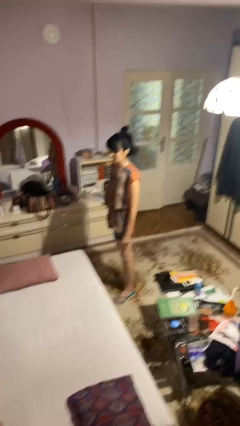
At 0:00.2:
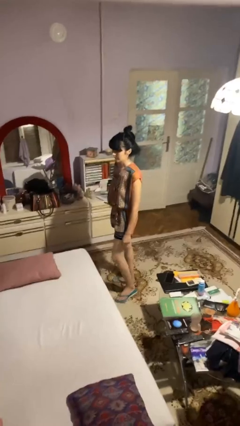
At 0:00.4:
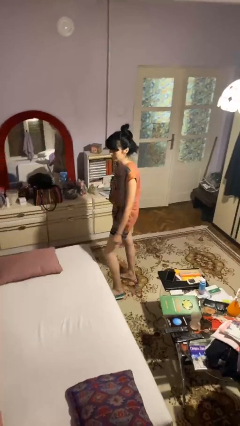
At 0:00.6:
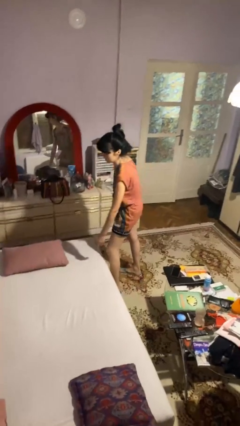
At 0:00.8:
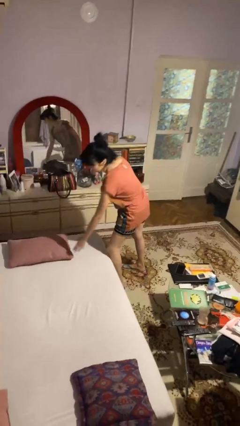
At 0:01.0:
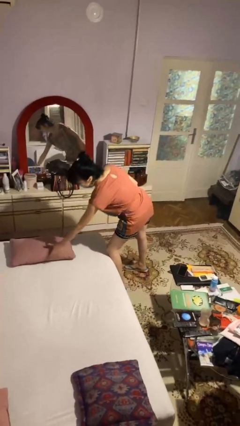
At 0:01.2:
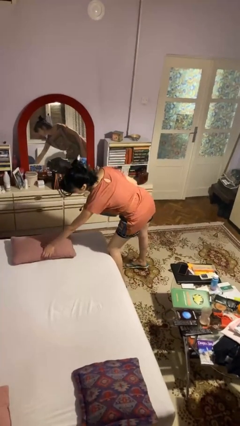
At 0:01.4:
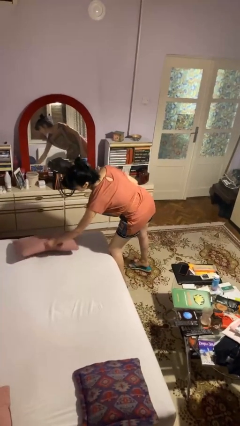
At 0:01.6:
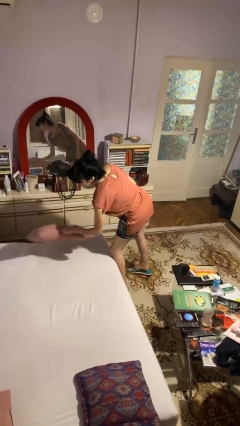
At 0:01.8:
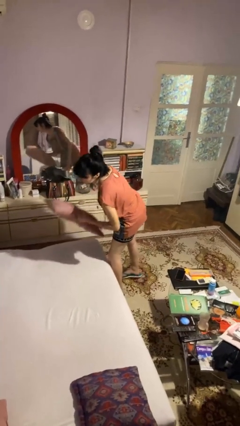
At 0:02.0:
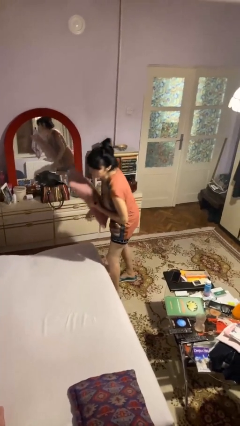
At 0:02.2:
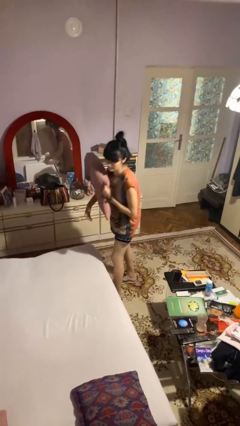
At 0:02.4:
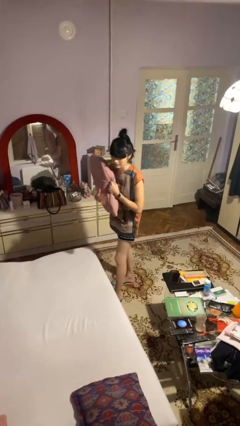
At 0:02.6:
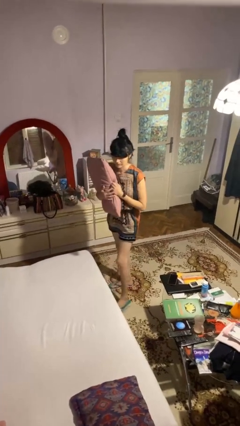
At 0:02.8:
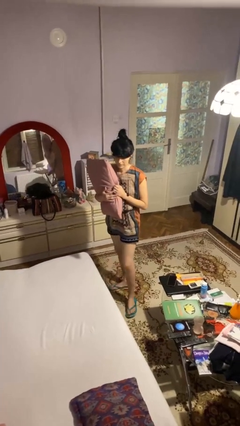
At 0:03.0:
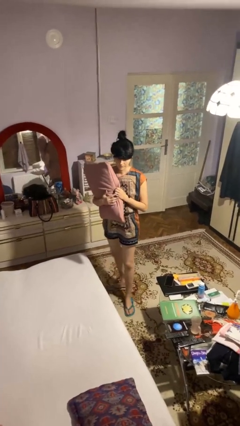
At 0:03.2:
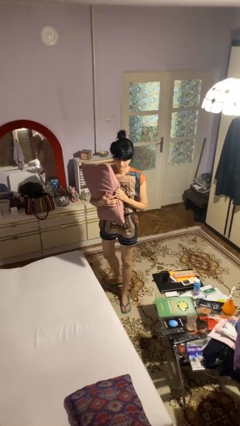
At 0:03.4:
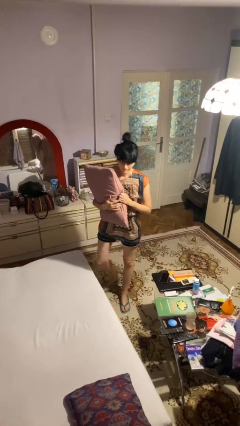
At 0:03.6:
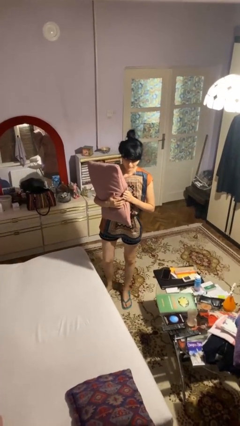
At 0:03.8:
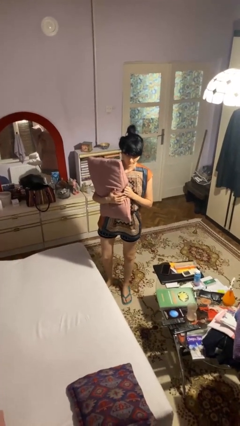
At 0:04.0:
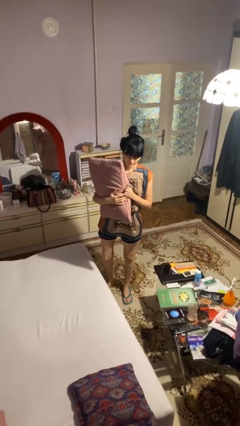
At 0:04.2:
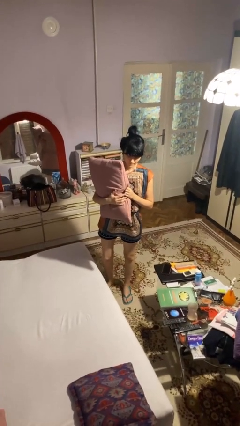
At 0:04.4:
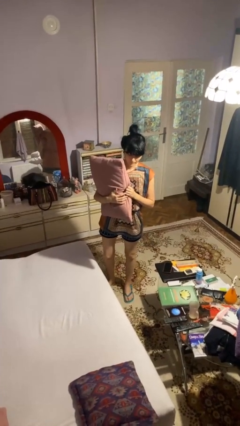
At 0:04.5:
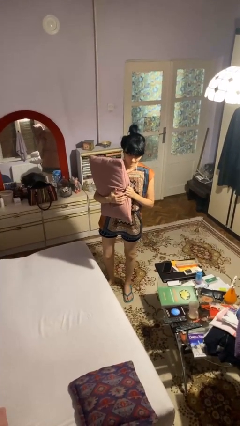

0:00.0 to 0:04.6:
person picks up object from bed

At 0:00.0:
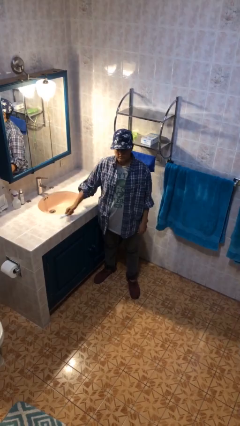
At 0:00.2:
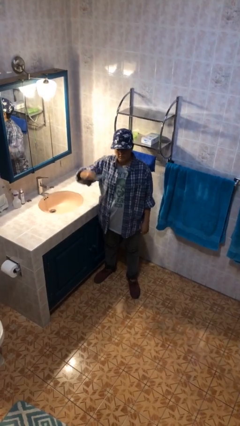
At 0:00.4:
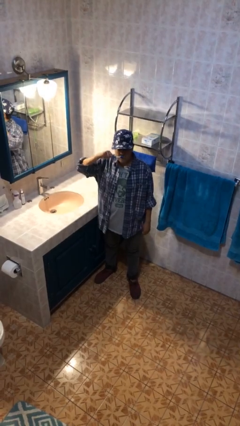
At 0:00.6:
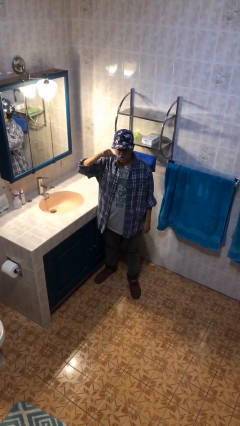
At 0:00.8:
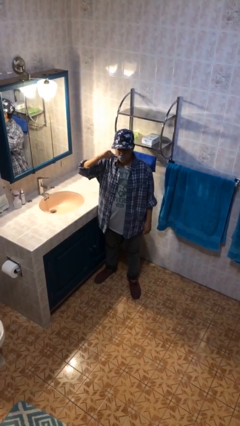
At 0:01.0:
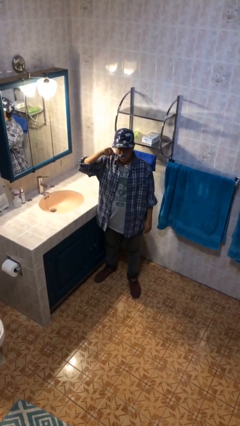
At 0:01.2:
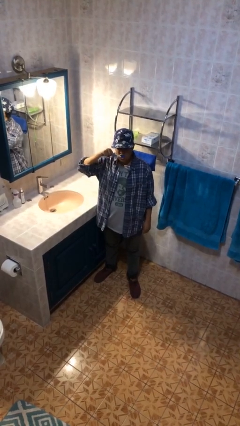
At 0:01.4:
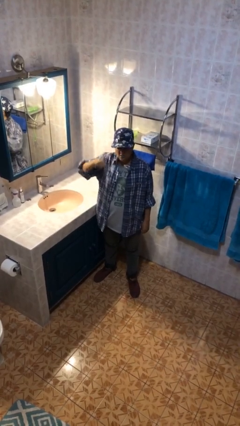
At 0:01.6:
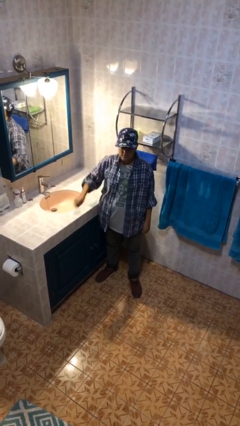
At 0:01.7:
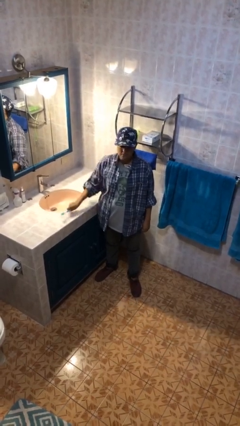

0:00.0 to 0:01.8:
person brushes teeth

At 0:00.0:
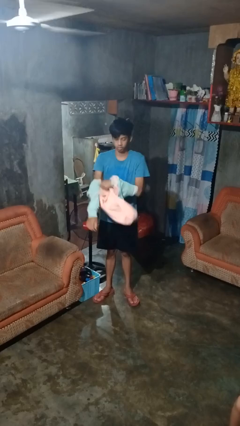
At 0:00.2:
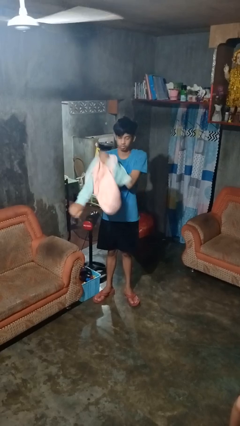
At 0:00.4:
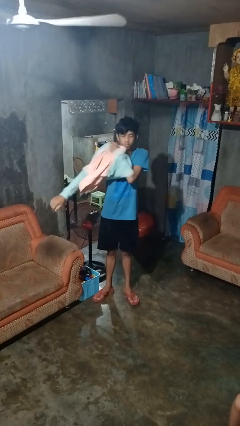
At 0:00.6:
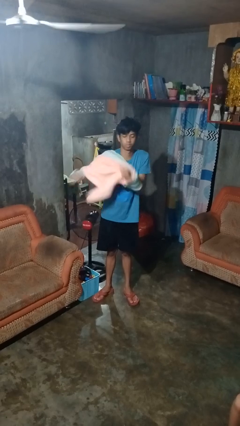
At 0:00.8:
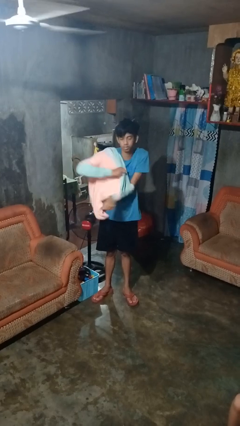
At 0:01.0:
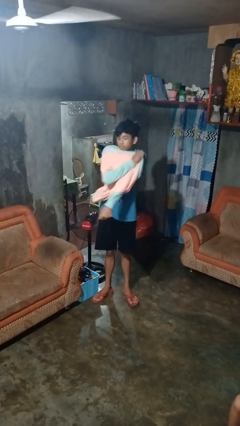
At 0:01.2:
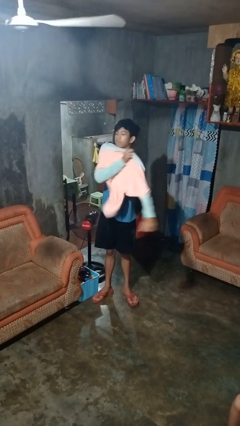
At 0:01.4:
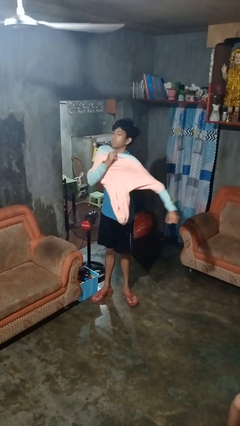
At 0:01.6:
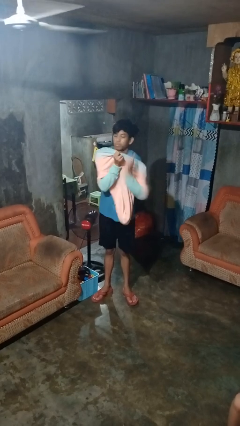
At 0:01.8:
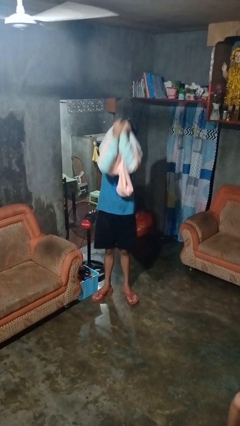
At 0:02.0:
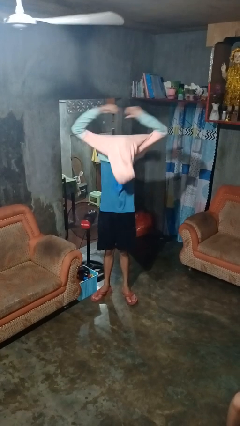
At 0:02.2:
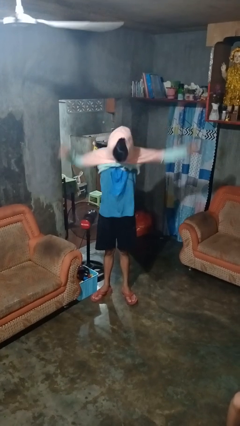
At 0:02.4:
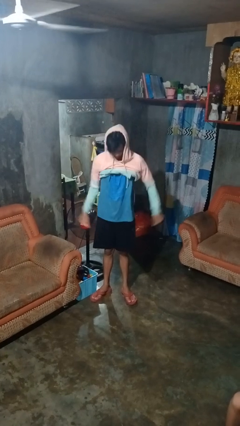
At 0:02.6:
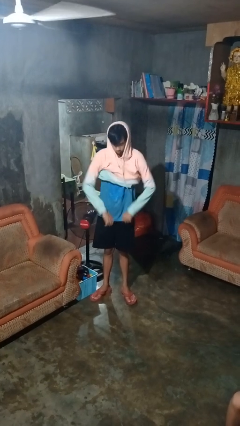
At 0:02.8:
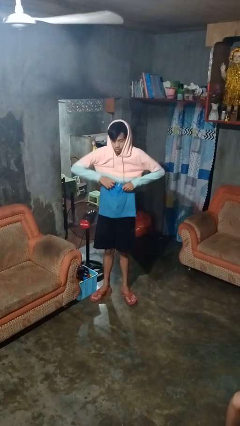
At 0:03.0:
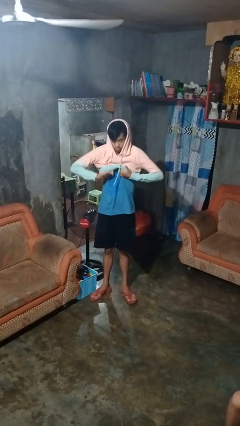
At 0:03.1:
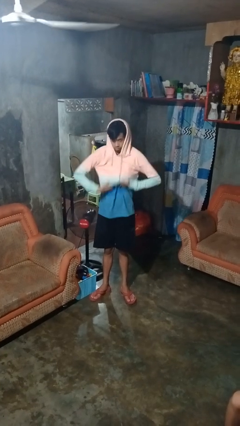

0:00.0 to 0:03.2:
person puts on hoodie

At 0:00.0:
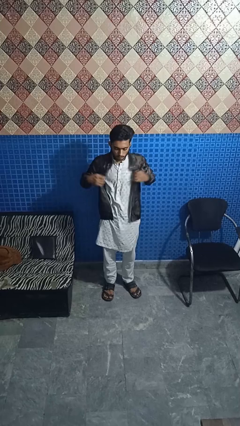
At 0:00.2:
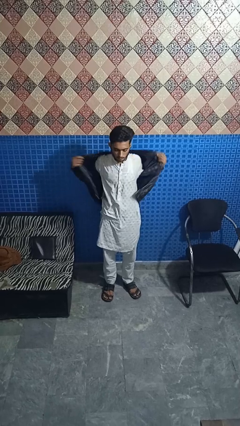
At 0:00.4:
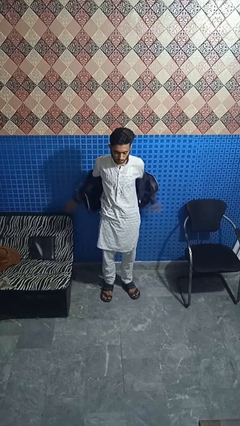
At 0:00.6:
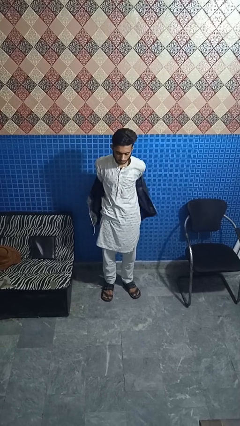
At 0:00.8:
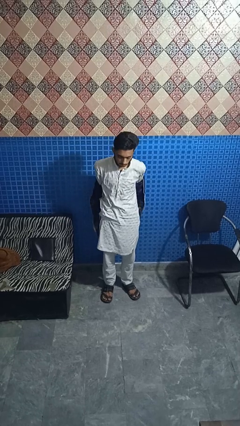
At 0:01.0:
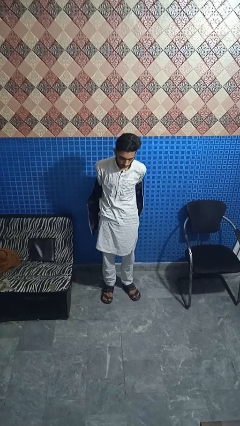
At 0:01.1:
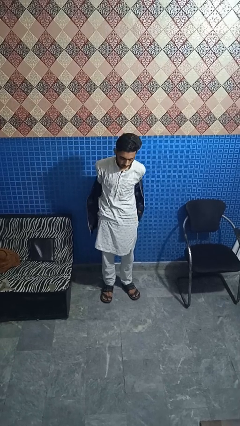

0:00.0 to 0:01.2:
person takes off jacket

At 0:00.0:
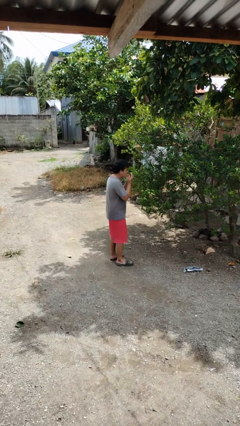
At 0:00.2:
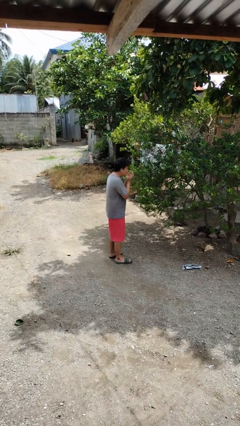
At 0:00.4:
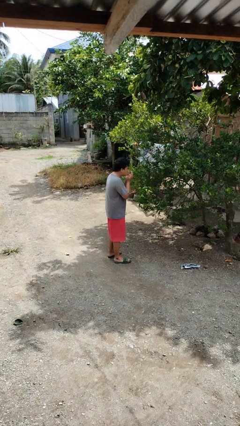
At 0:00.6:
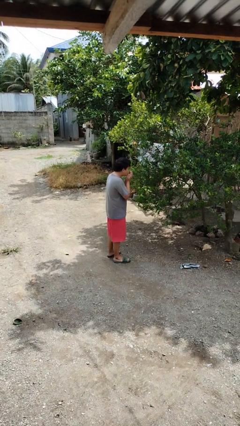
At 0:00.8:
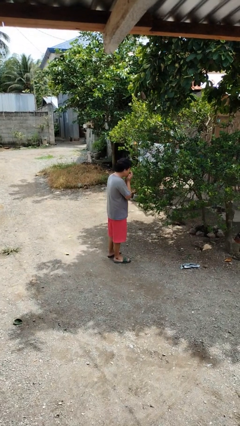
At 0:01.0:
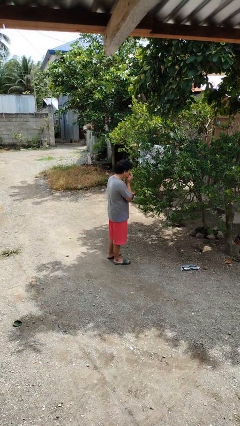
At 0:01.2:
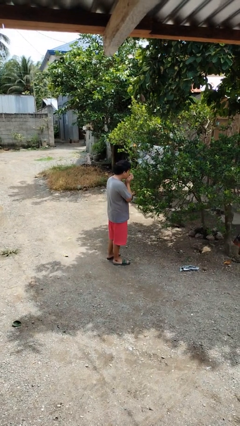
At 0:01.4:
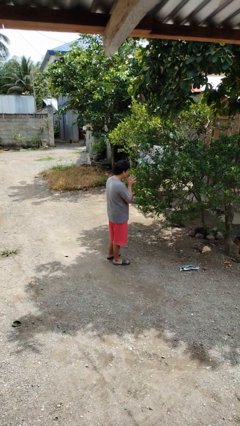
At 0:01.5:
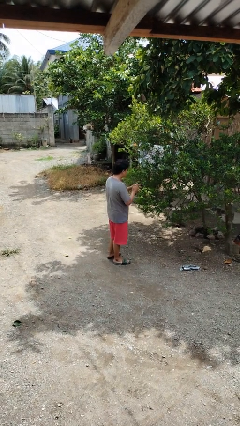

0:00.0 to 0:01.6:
person blows into hands

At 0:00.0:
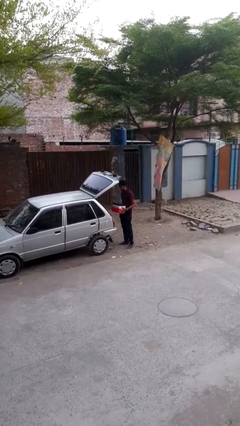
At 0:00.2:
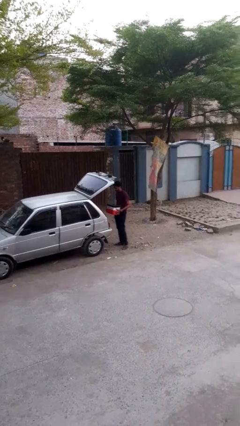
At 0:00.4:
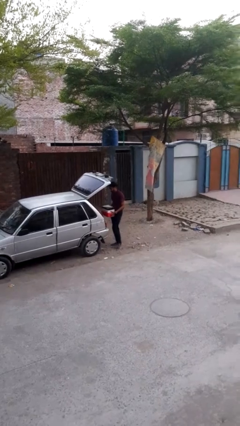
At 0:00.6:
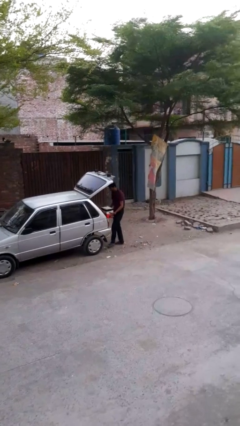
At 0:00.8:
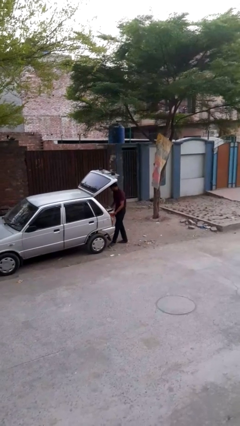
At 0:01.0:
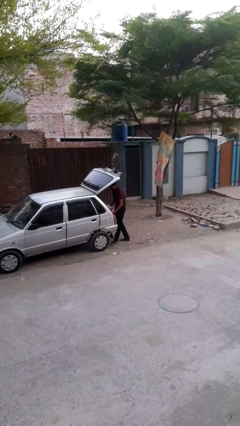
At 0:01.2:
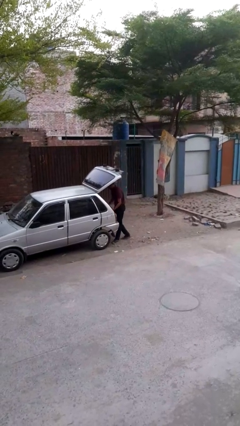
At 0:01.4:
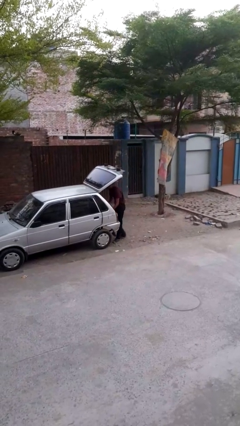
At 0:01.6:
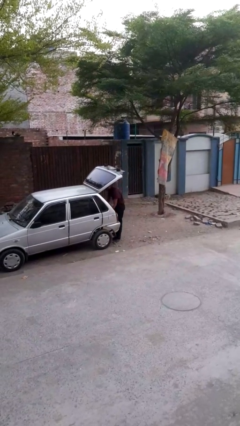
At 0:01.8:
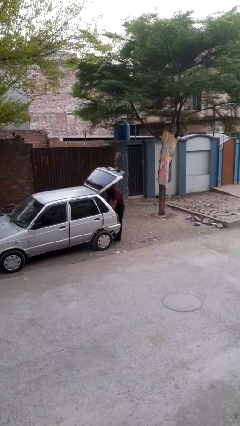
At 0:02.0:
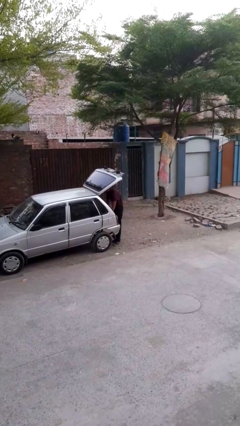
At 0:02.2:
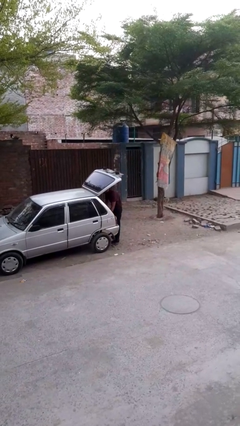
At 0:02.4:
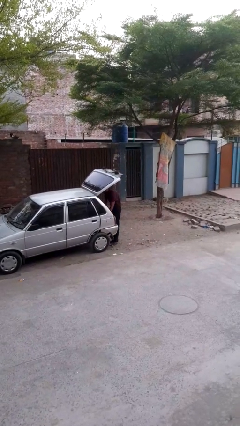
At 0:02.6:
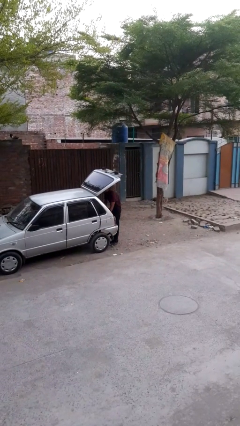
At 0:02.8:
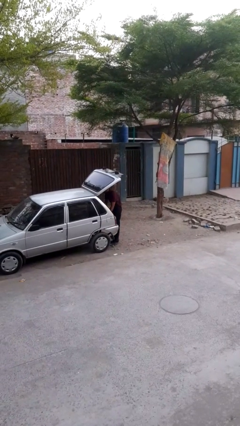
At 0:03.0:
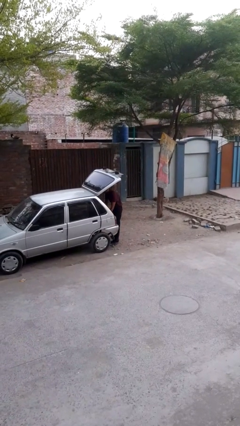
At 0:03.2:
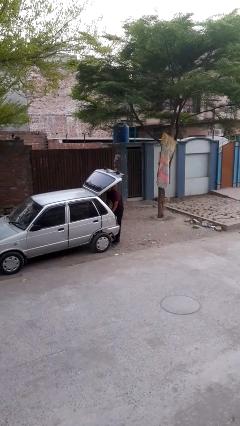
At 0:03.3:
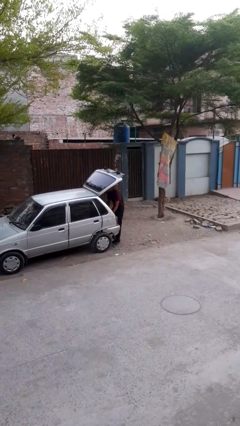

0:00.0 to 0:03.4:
person loads car

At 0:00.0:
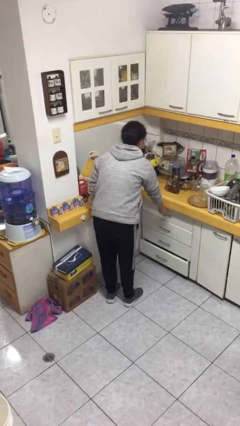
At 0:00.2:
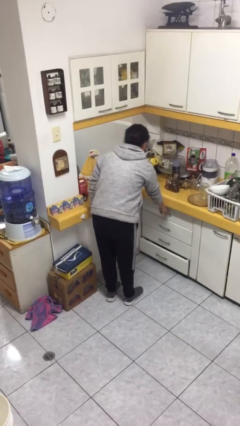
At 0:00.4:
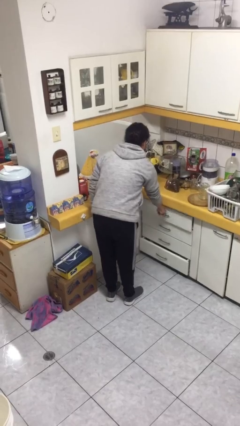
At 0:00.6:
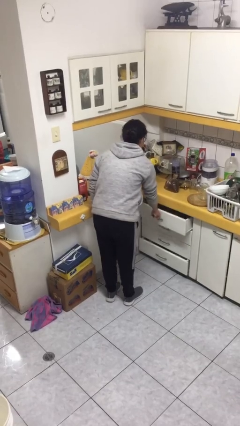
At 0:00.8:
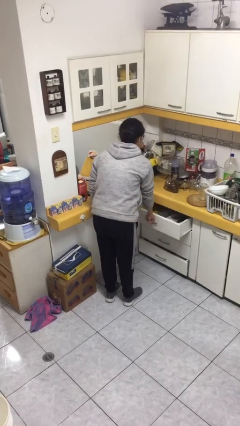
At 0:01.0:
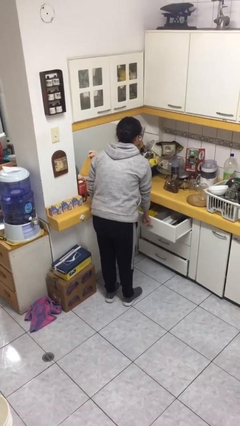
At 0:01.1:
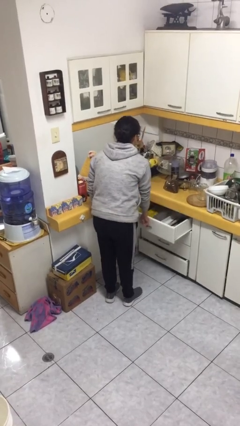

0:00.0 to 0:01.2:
person opens kitchen drawer
